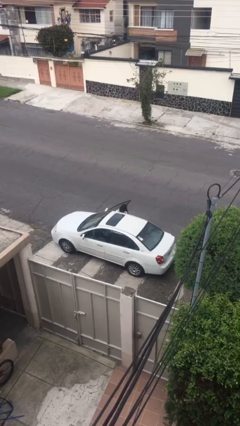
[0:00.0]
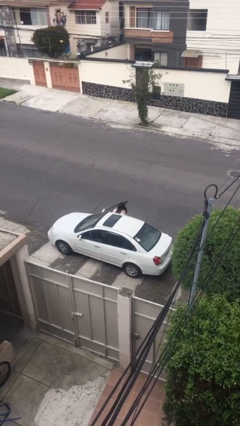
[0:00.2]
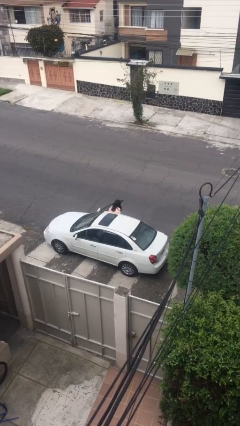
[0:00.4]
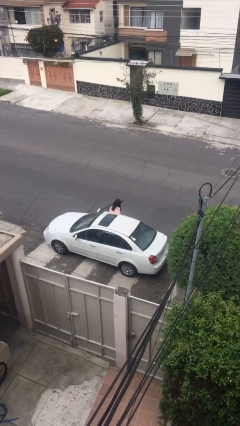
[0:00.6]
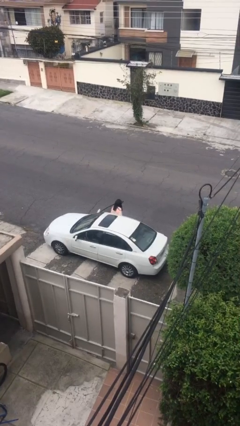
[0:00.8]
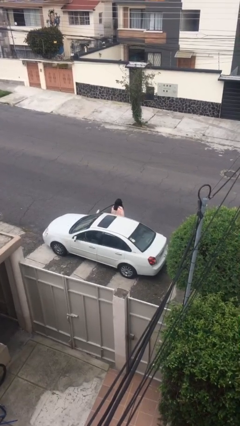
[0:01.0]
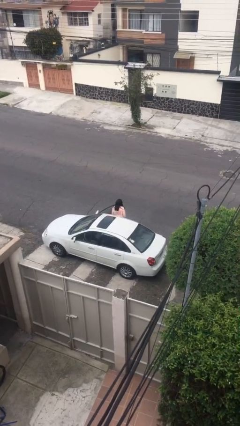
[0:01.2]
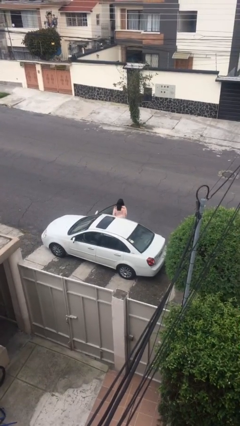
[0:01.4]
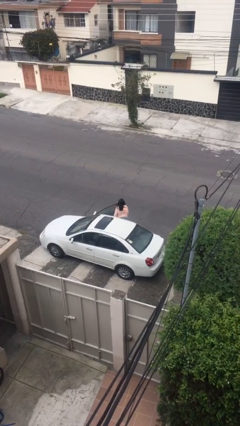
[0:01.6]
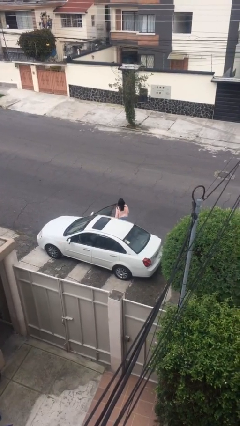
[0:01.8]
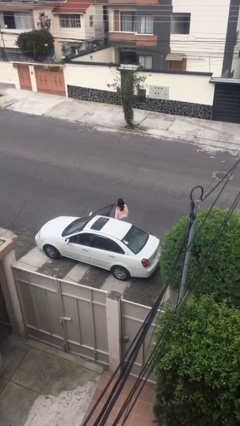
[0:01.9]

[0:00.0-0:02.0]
person exits car

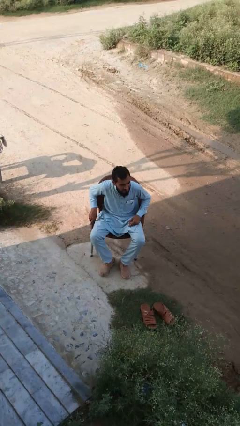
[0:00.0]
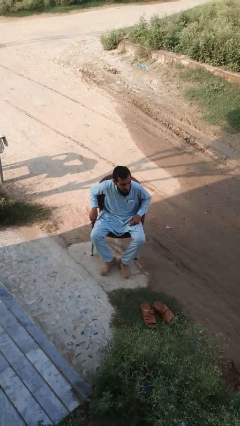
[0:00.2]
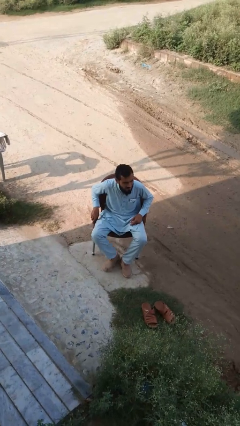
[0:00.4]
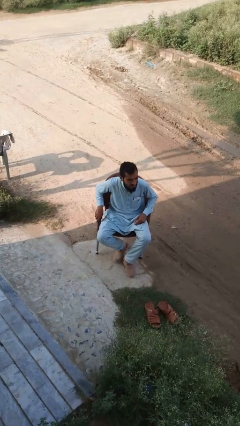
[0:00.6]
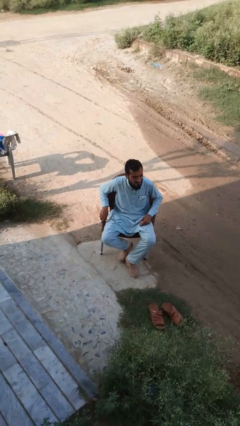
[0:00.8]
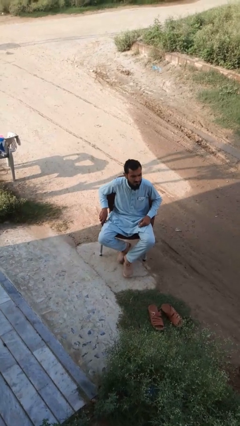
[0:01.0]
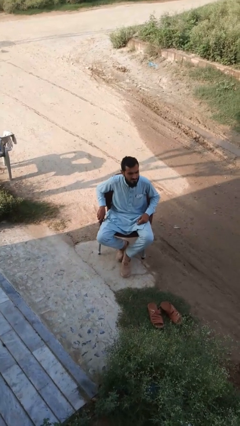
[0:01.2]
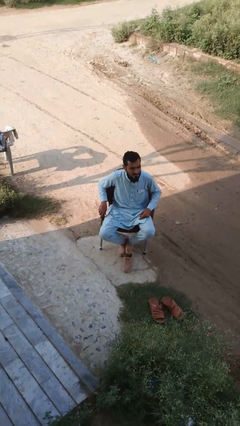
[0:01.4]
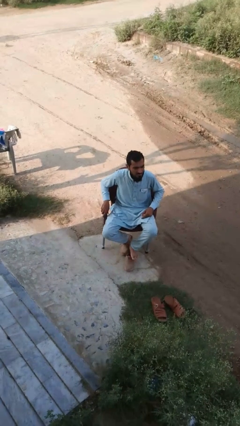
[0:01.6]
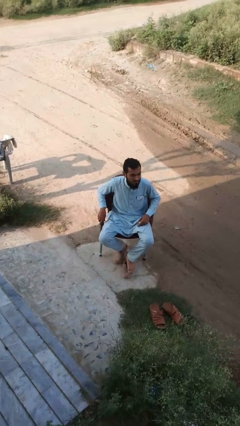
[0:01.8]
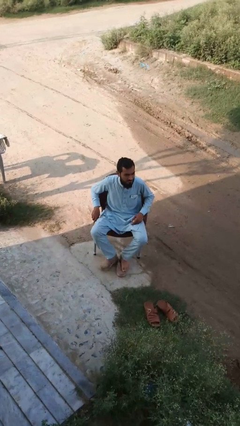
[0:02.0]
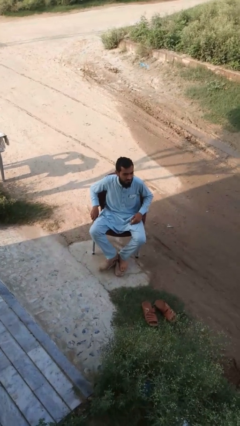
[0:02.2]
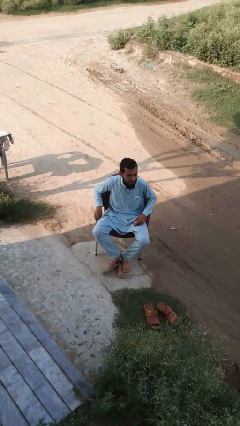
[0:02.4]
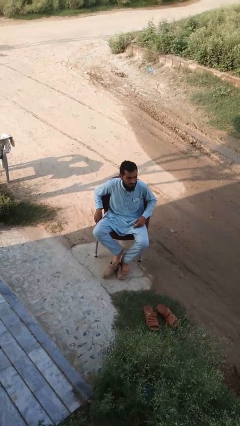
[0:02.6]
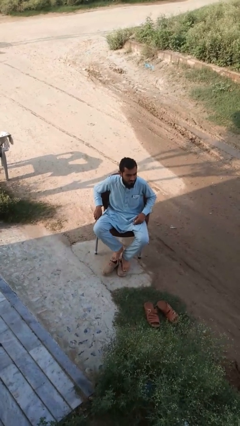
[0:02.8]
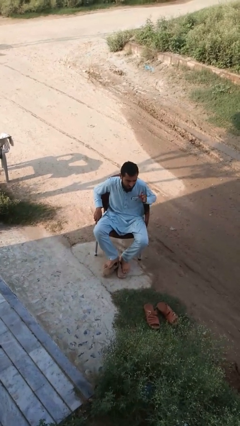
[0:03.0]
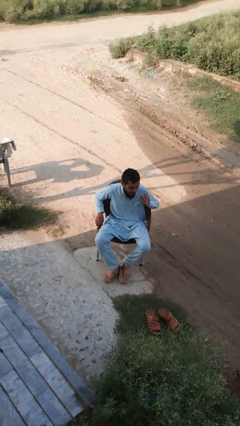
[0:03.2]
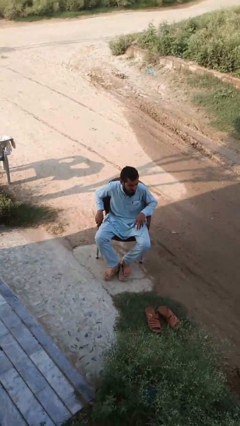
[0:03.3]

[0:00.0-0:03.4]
person takes off shoes

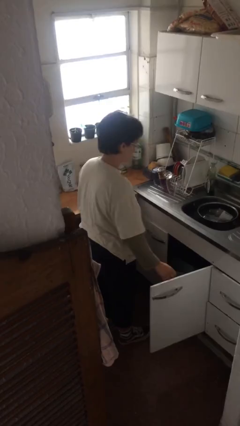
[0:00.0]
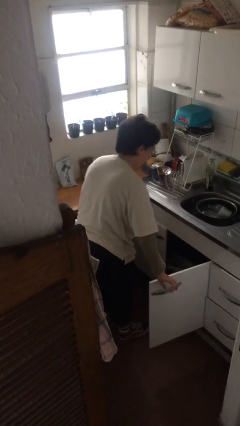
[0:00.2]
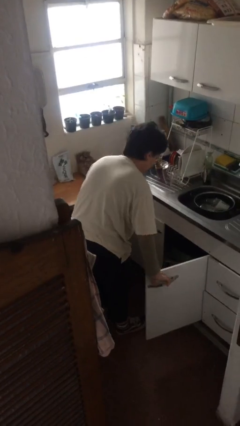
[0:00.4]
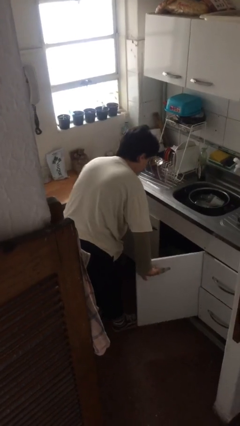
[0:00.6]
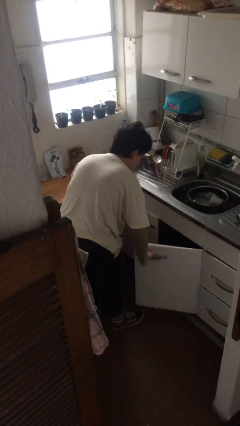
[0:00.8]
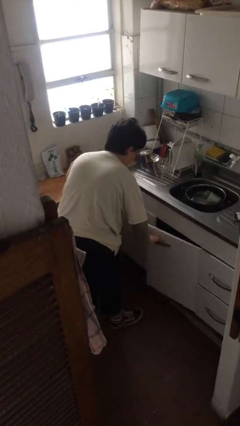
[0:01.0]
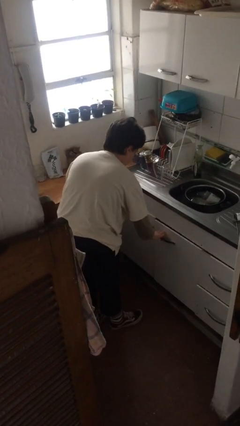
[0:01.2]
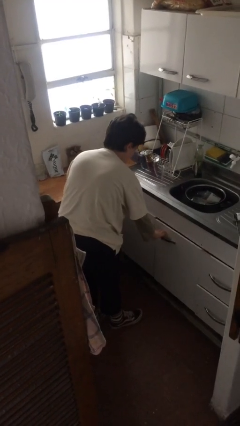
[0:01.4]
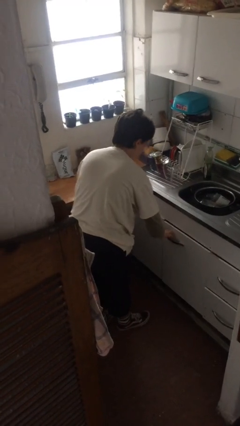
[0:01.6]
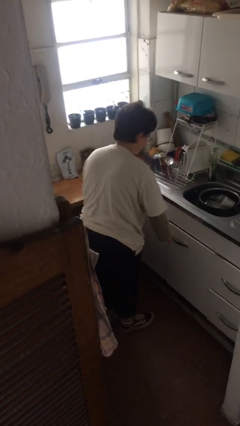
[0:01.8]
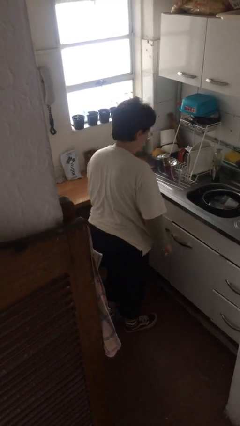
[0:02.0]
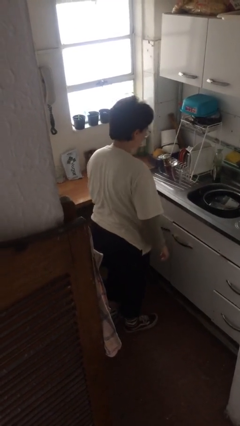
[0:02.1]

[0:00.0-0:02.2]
person closes cabinet

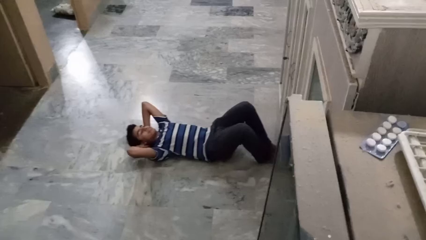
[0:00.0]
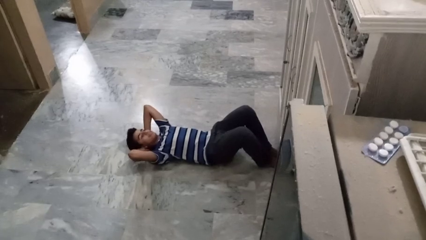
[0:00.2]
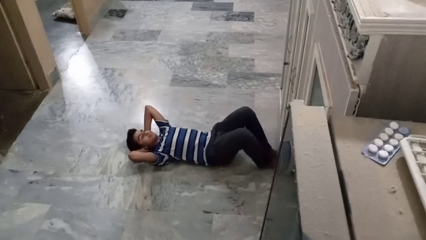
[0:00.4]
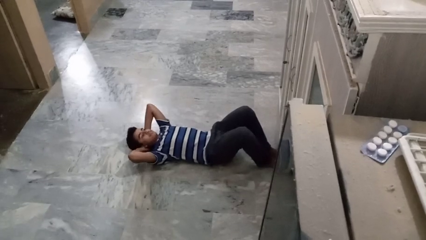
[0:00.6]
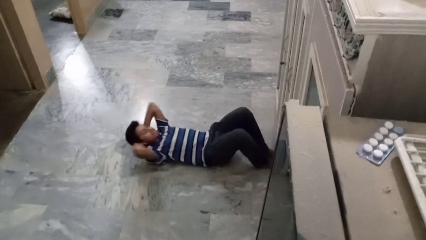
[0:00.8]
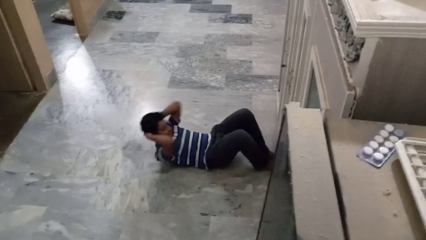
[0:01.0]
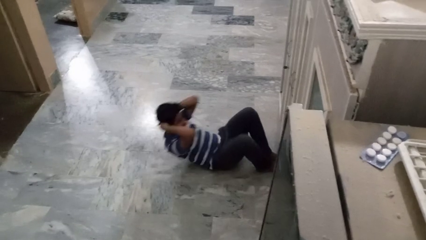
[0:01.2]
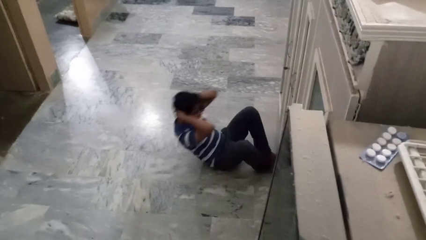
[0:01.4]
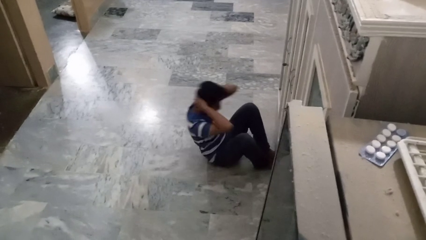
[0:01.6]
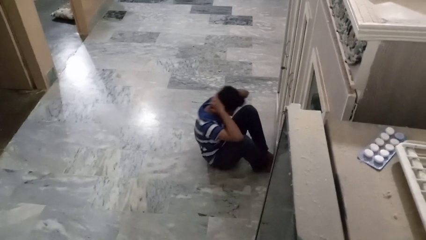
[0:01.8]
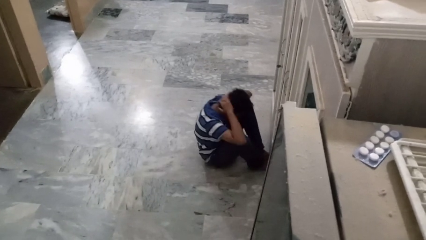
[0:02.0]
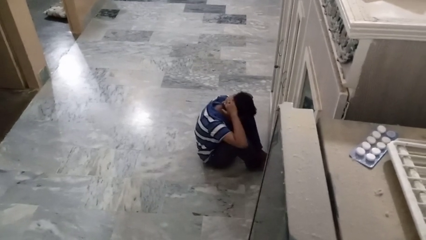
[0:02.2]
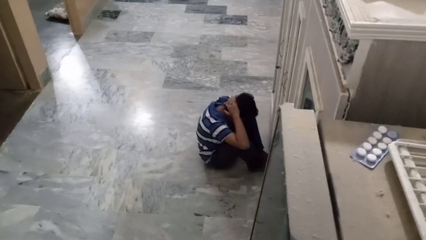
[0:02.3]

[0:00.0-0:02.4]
person exercises with situp

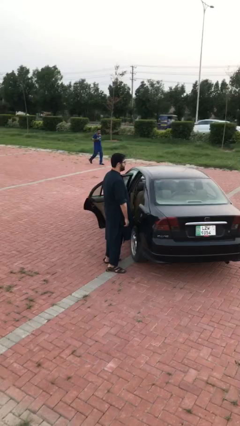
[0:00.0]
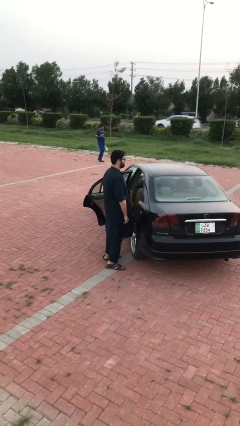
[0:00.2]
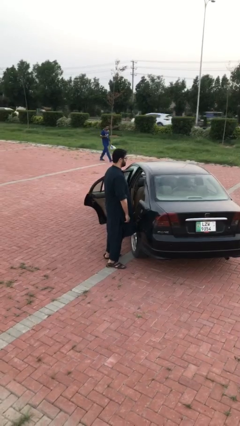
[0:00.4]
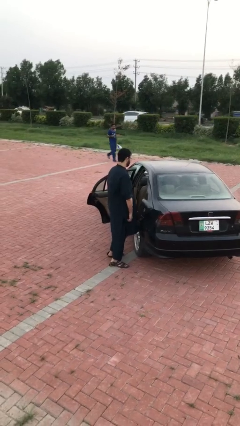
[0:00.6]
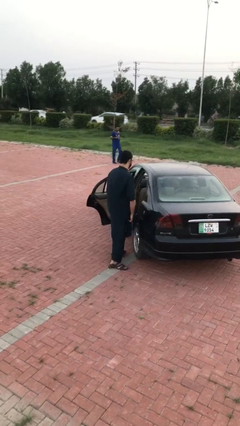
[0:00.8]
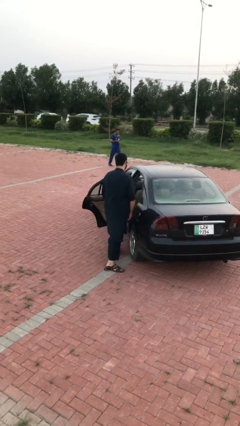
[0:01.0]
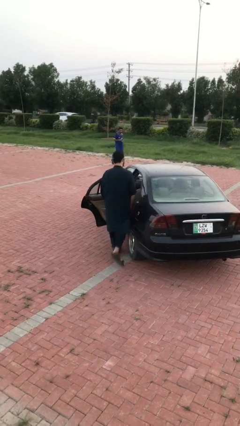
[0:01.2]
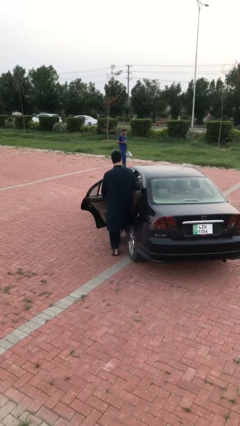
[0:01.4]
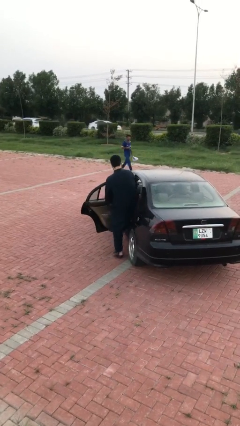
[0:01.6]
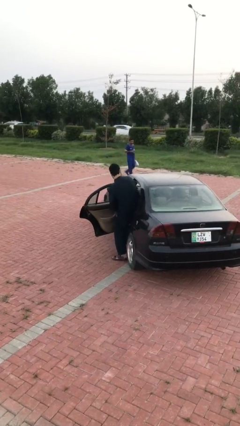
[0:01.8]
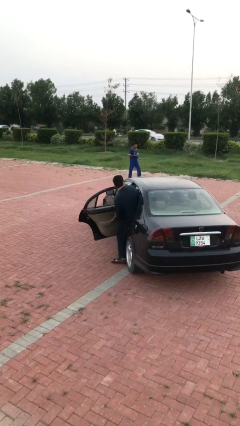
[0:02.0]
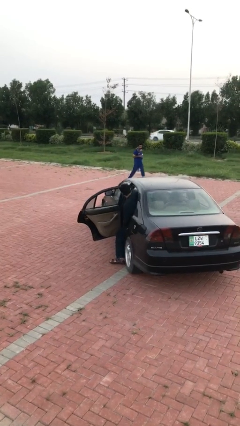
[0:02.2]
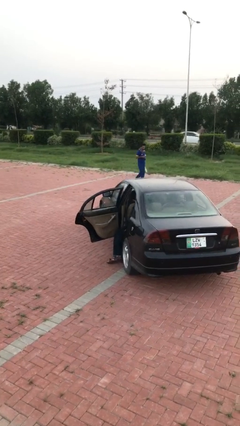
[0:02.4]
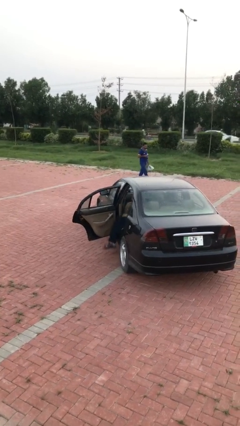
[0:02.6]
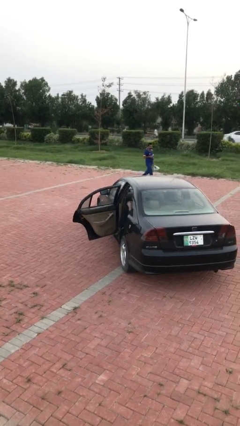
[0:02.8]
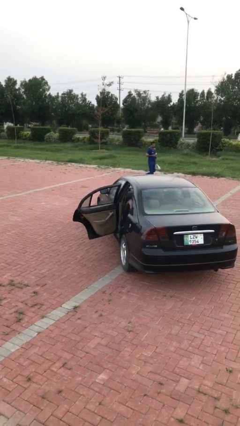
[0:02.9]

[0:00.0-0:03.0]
person enters car

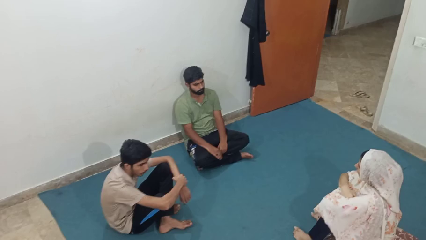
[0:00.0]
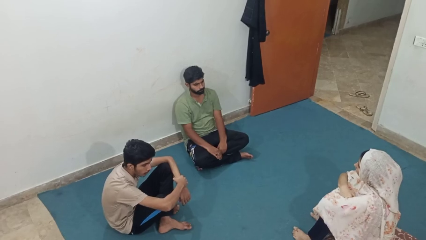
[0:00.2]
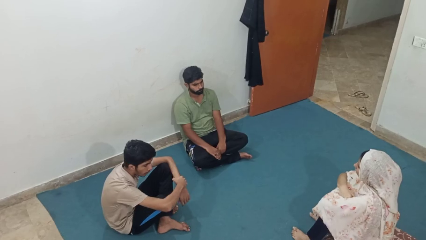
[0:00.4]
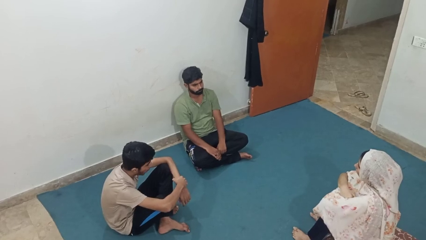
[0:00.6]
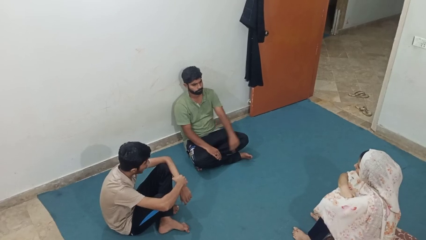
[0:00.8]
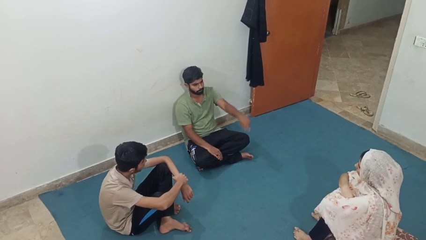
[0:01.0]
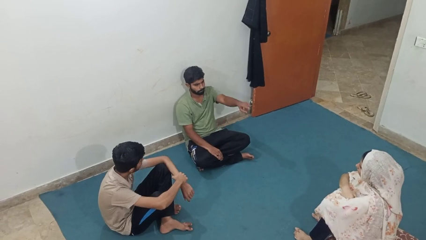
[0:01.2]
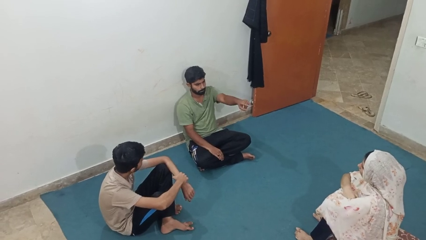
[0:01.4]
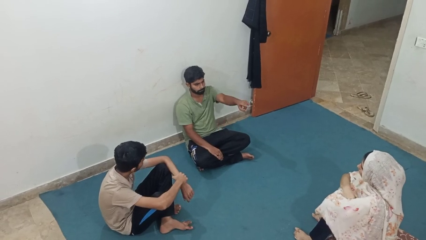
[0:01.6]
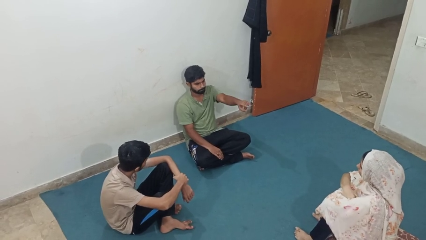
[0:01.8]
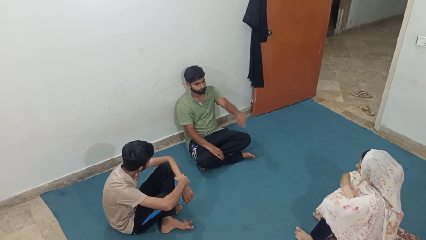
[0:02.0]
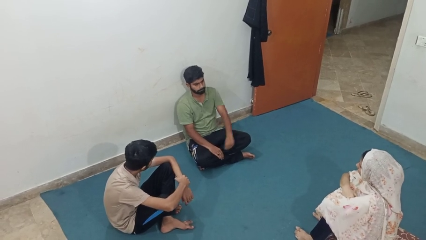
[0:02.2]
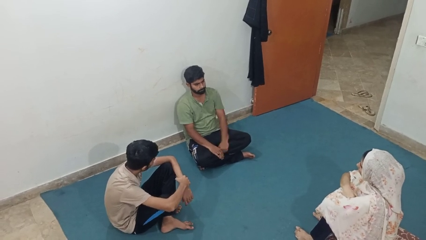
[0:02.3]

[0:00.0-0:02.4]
person points at person

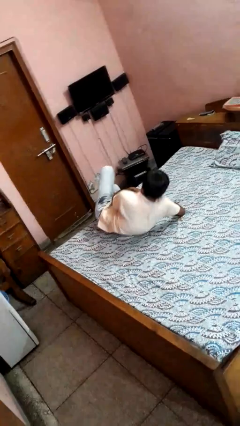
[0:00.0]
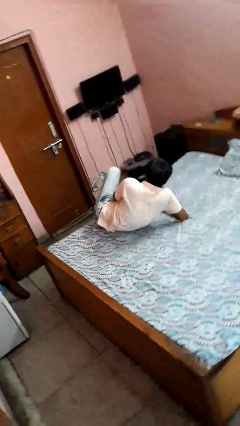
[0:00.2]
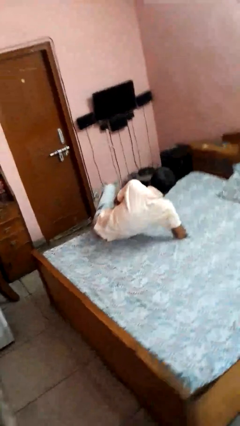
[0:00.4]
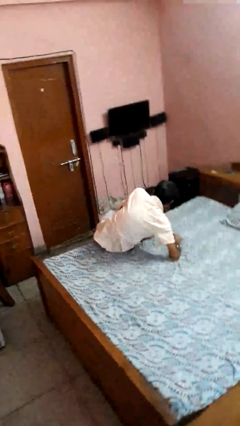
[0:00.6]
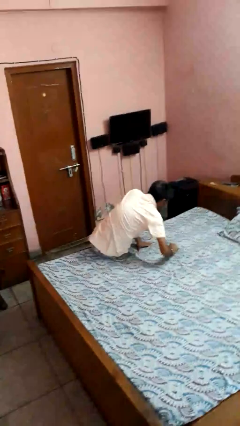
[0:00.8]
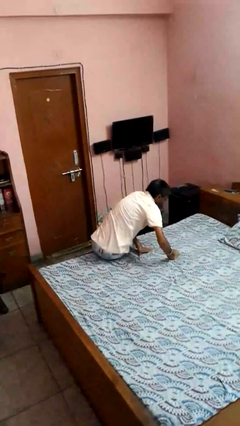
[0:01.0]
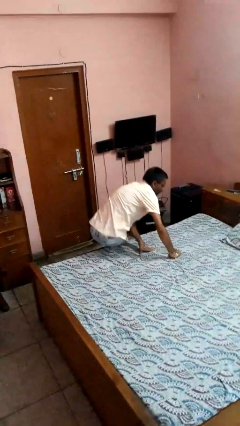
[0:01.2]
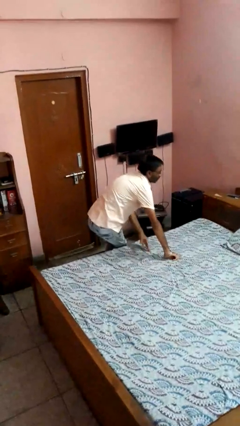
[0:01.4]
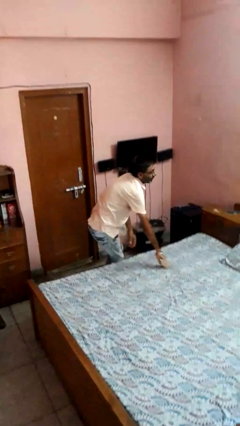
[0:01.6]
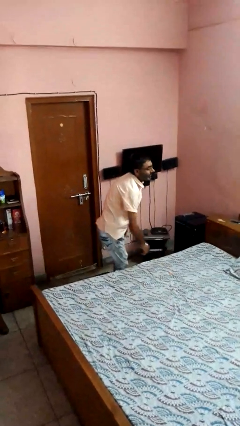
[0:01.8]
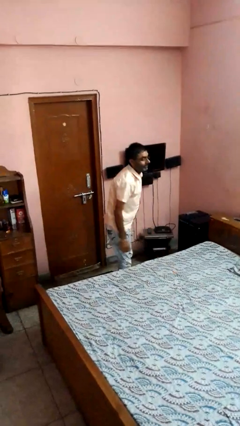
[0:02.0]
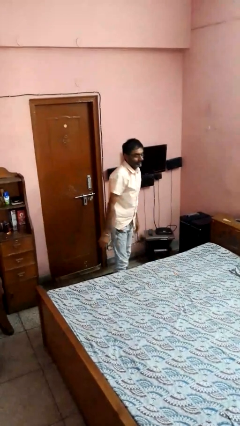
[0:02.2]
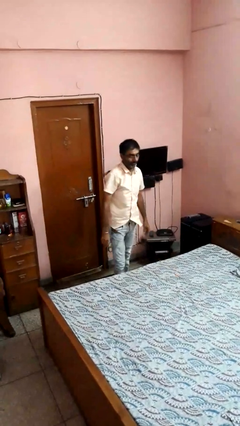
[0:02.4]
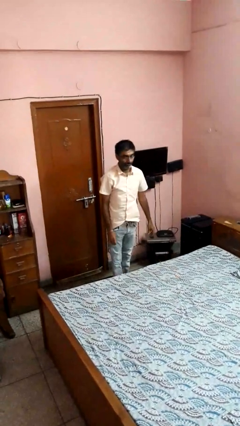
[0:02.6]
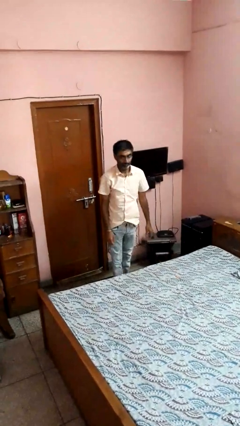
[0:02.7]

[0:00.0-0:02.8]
person stands up
